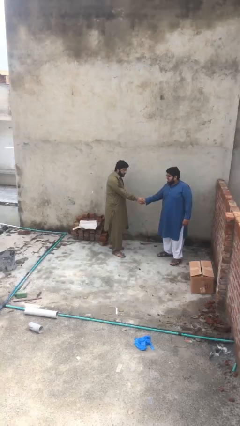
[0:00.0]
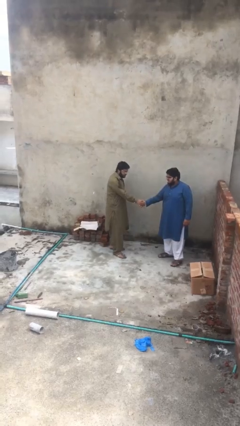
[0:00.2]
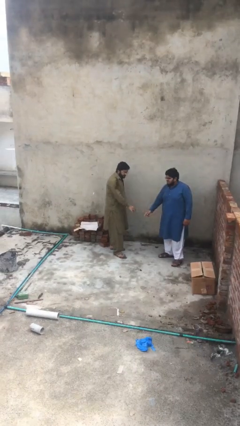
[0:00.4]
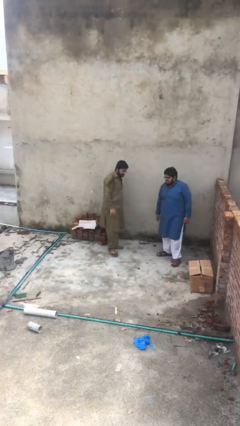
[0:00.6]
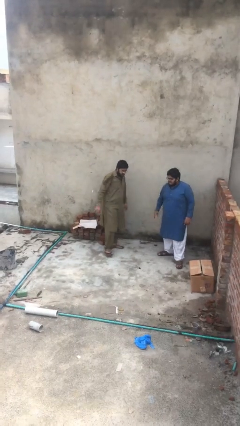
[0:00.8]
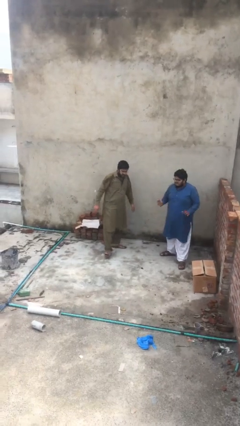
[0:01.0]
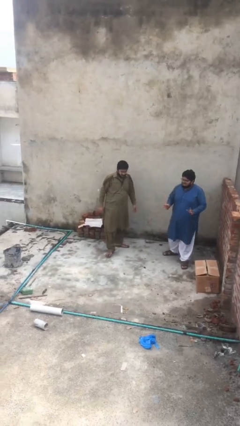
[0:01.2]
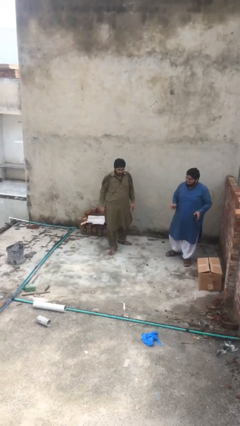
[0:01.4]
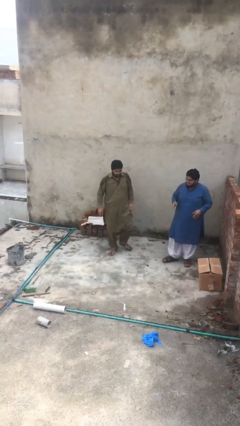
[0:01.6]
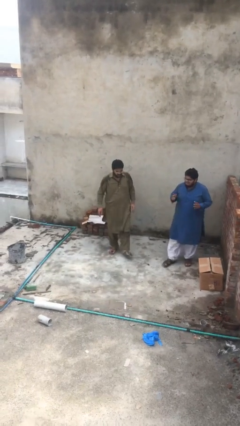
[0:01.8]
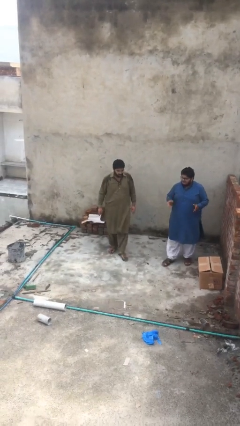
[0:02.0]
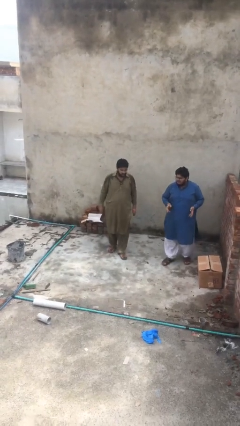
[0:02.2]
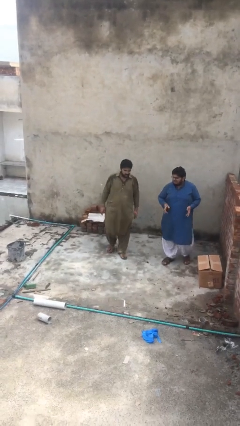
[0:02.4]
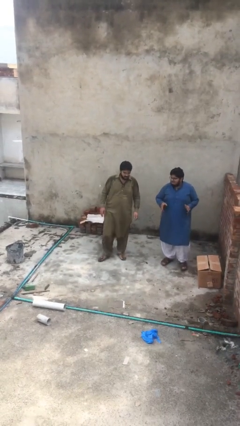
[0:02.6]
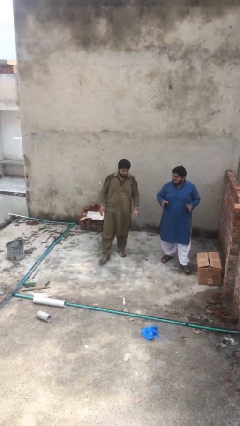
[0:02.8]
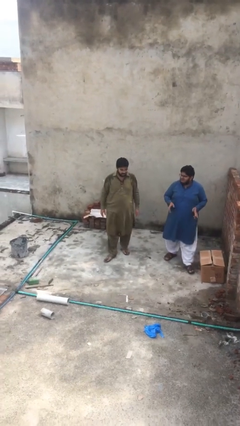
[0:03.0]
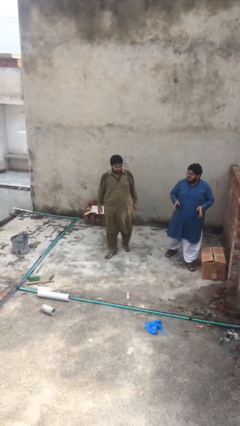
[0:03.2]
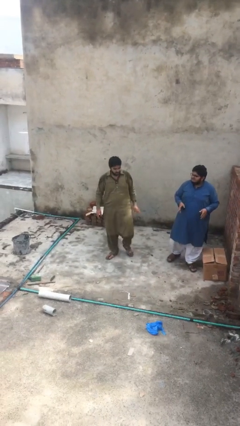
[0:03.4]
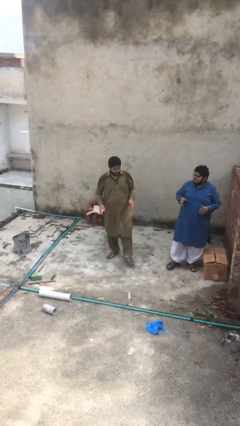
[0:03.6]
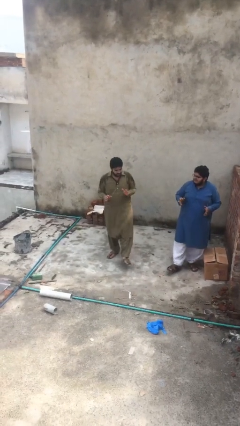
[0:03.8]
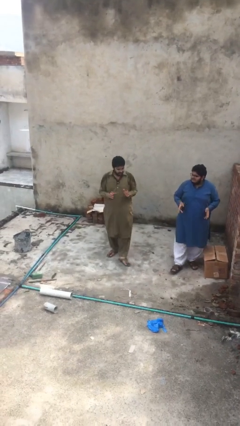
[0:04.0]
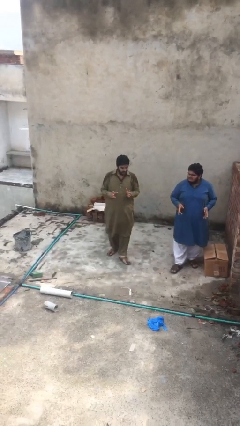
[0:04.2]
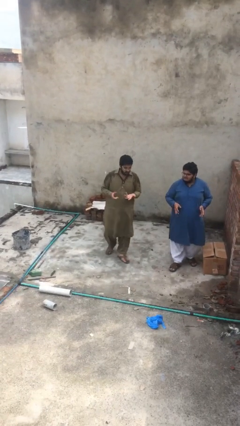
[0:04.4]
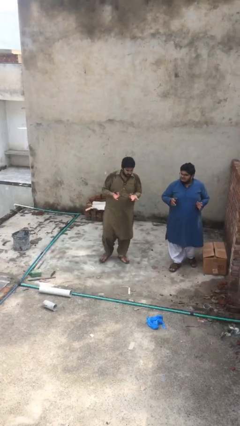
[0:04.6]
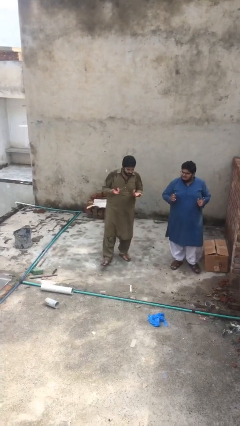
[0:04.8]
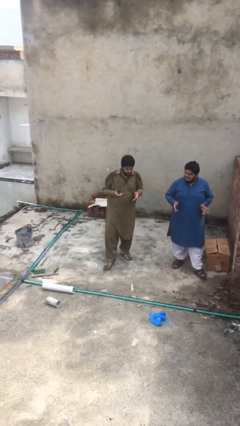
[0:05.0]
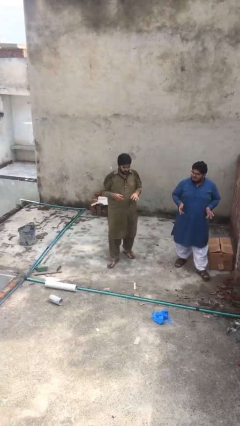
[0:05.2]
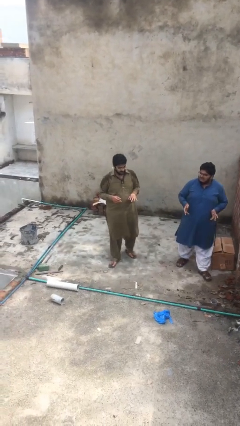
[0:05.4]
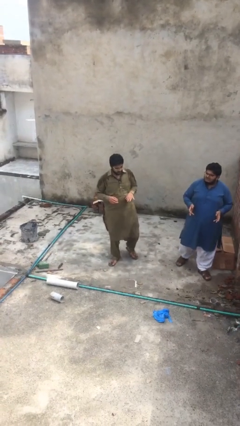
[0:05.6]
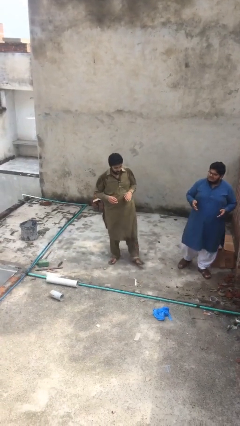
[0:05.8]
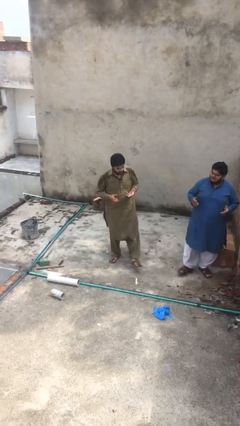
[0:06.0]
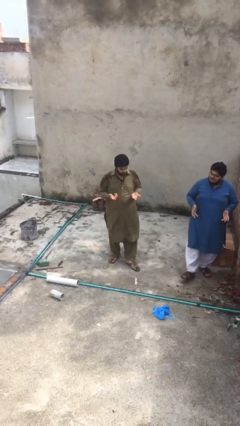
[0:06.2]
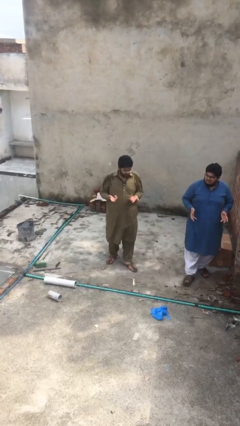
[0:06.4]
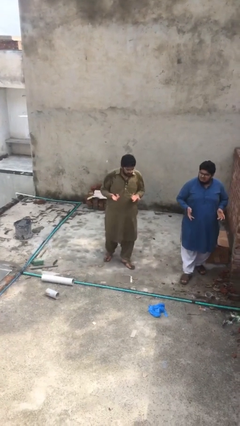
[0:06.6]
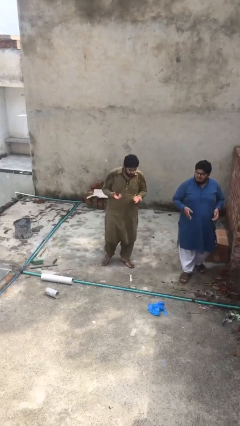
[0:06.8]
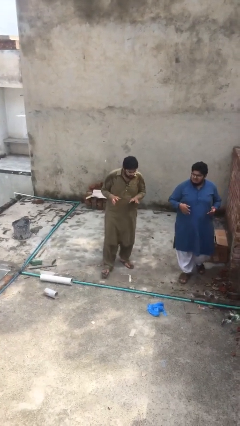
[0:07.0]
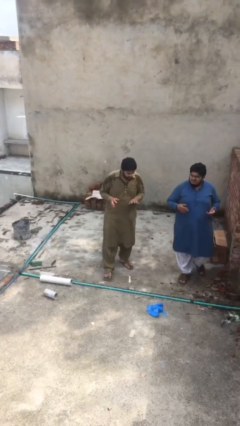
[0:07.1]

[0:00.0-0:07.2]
person talks to person

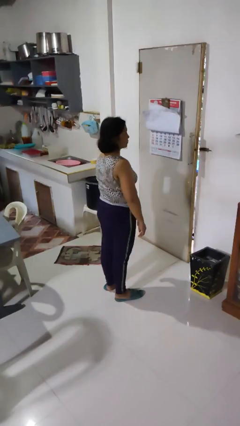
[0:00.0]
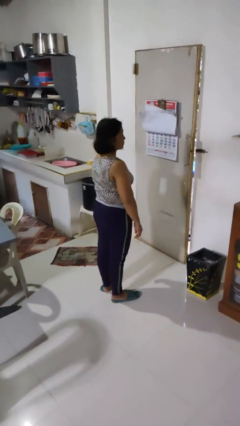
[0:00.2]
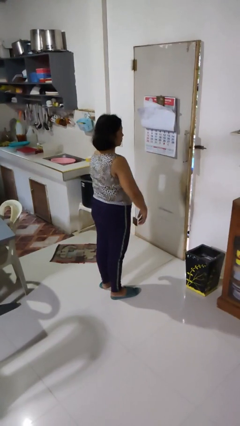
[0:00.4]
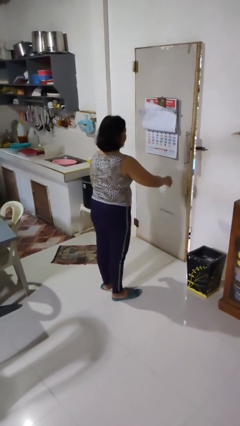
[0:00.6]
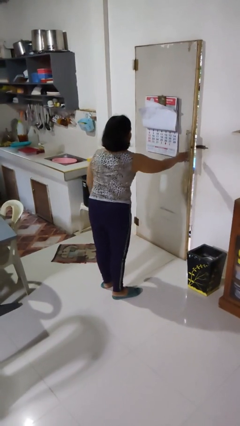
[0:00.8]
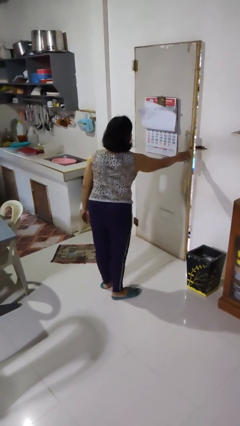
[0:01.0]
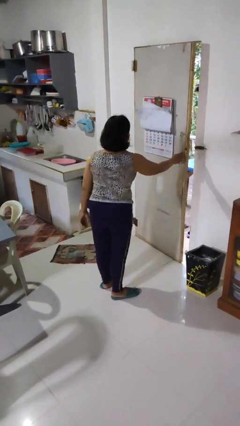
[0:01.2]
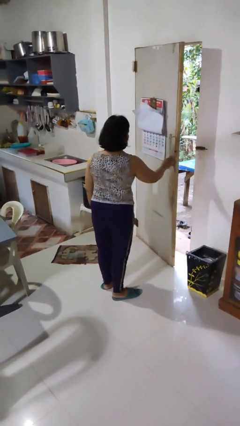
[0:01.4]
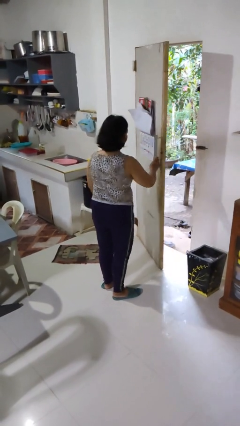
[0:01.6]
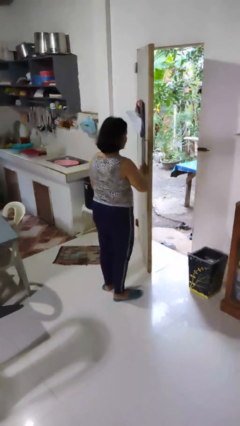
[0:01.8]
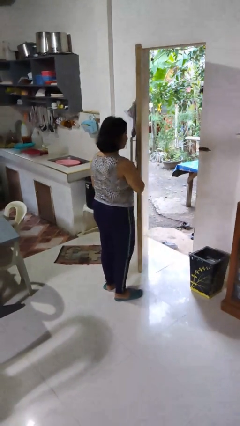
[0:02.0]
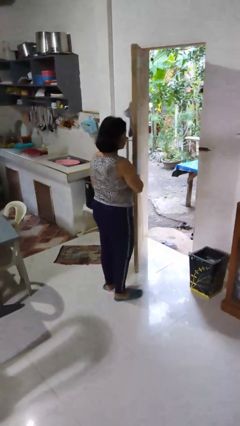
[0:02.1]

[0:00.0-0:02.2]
person opens facility door

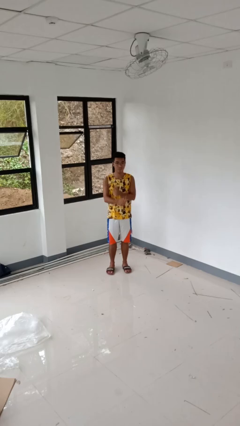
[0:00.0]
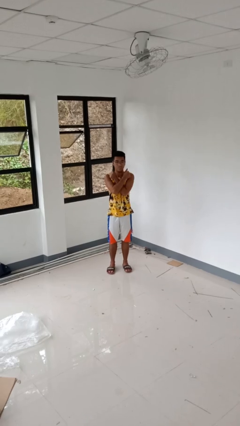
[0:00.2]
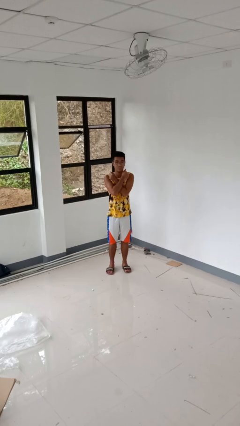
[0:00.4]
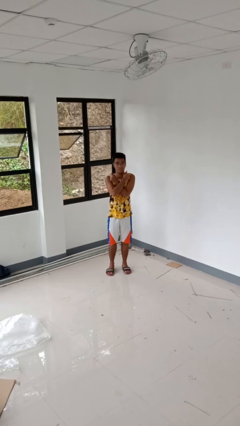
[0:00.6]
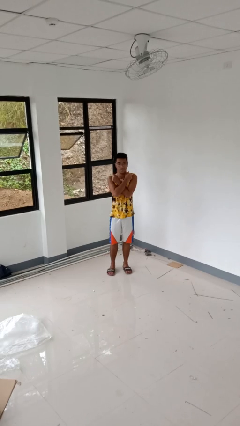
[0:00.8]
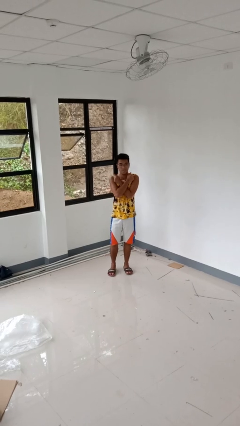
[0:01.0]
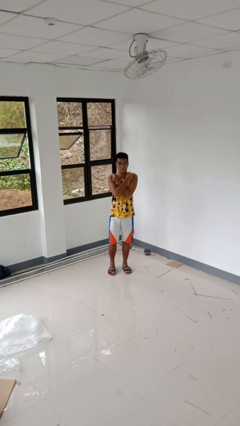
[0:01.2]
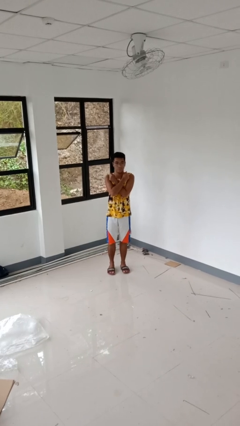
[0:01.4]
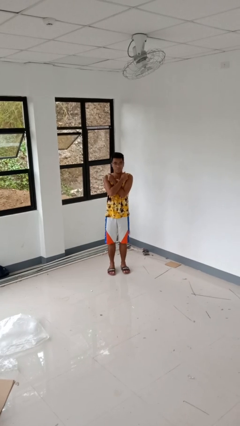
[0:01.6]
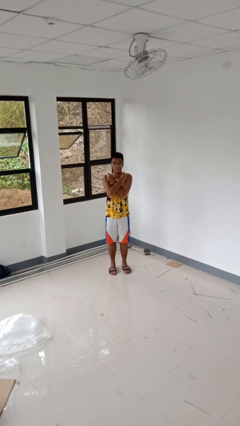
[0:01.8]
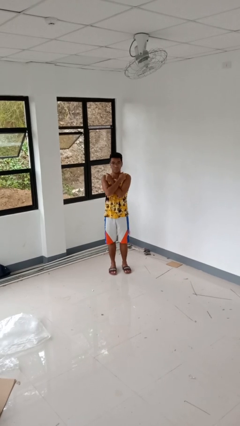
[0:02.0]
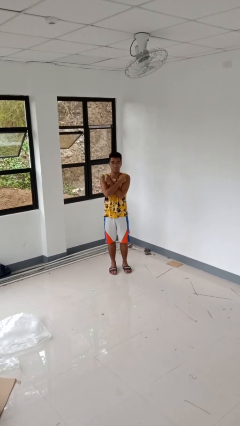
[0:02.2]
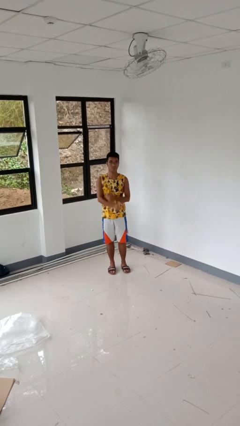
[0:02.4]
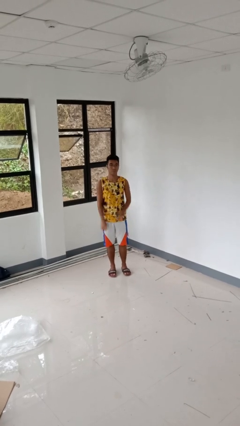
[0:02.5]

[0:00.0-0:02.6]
person gestures arms x

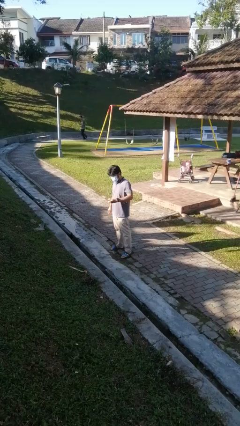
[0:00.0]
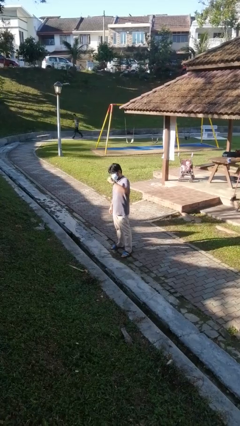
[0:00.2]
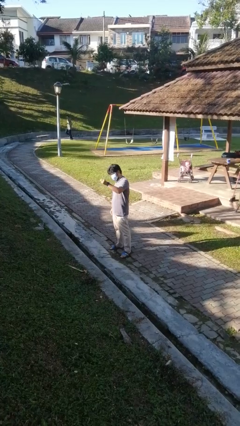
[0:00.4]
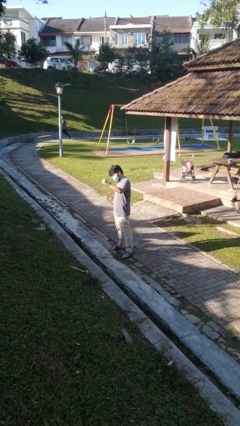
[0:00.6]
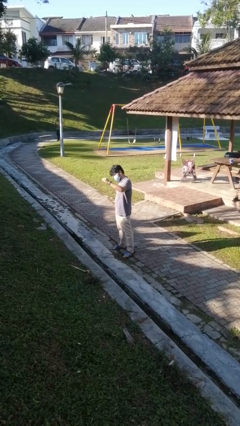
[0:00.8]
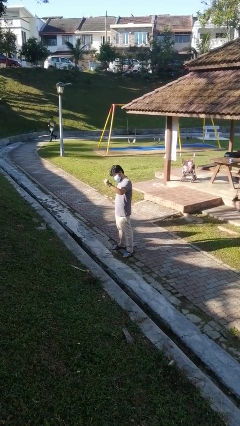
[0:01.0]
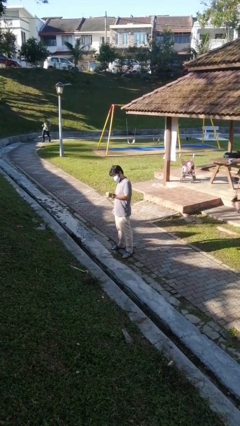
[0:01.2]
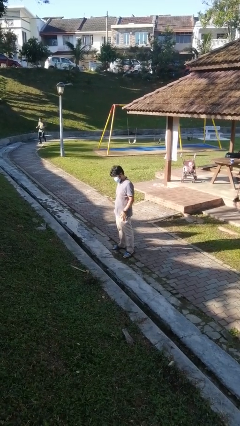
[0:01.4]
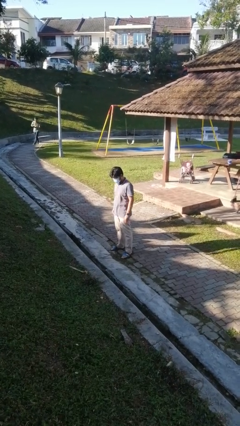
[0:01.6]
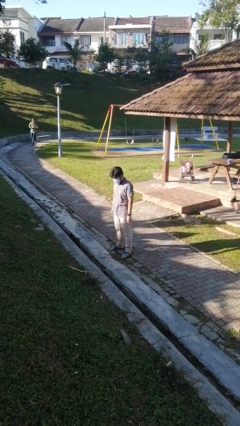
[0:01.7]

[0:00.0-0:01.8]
person snaps fingers

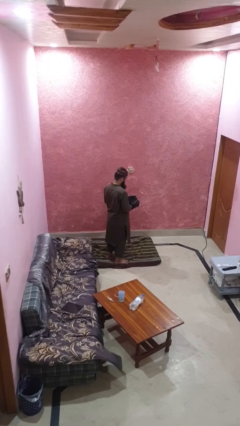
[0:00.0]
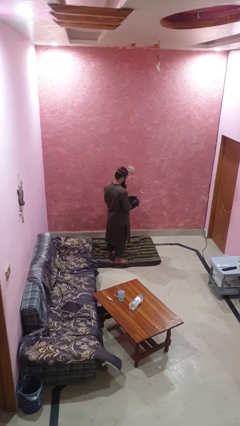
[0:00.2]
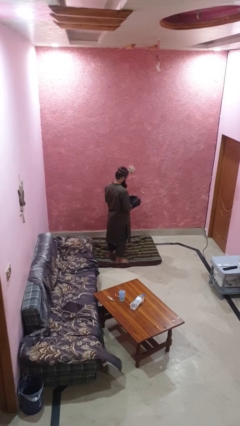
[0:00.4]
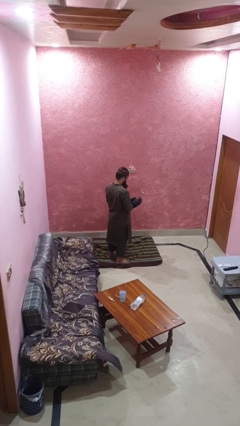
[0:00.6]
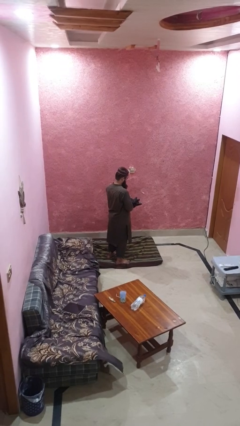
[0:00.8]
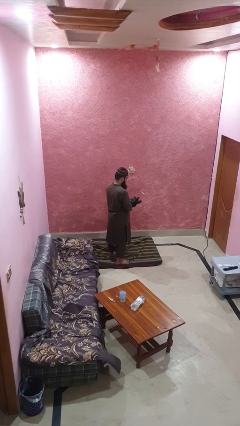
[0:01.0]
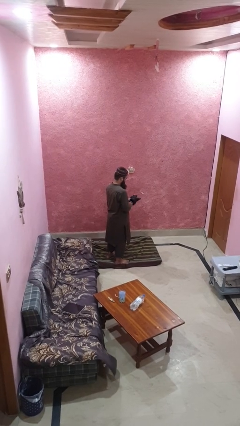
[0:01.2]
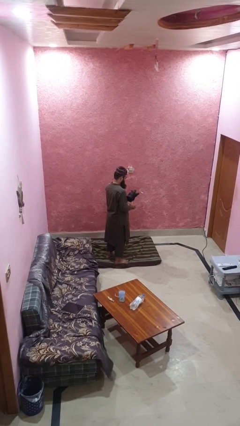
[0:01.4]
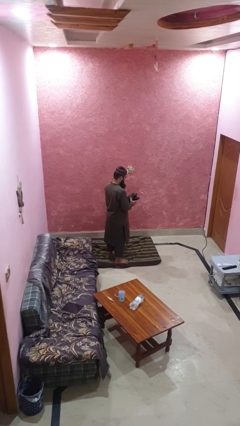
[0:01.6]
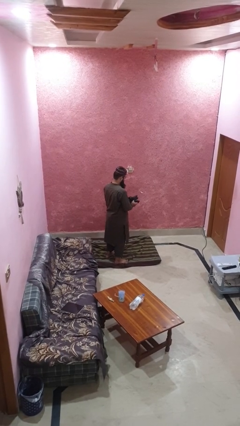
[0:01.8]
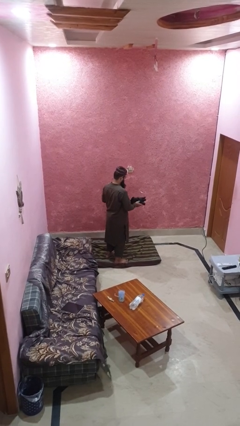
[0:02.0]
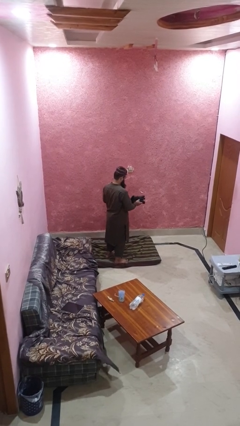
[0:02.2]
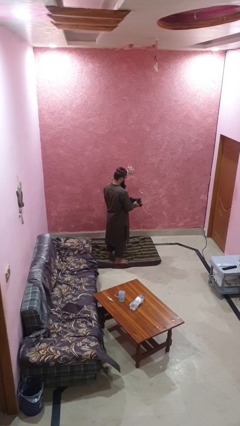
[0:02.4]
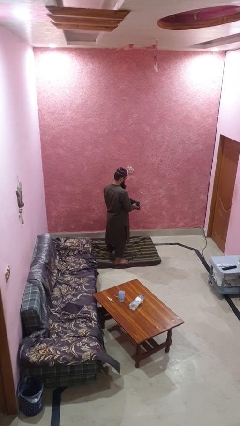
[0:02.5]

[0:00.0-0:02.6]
person takes off gloves

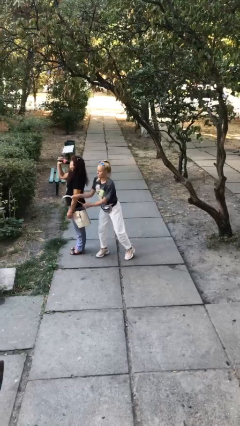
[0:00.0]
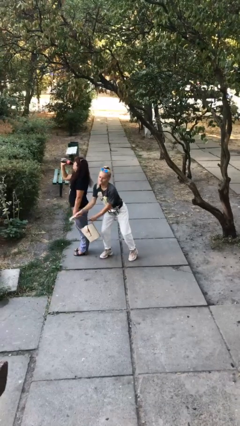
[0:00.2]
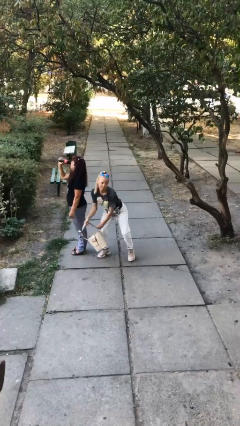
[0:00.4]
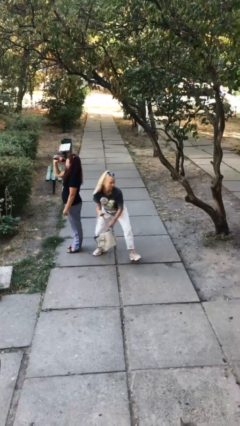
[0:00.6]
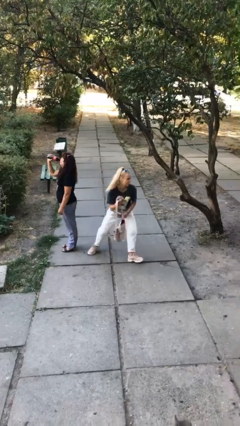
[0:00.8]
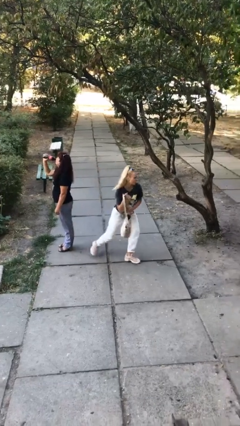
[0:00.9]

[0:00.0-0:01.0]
person steals object from person
